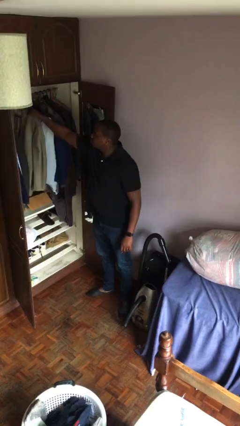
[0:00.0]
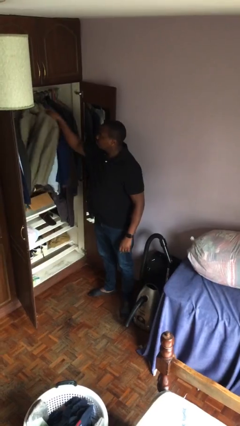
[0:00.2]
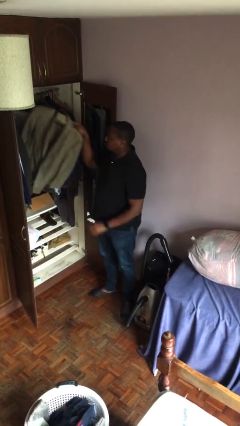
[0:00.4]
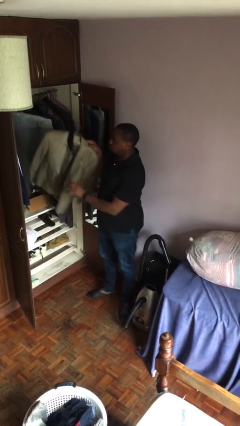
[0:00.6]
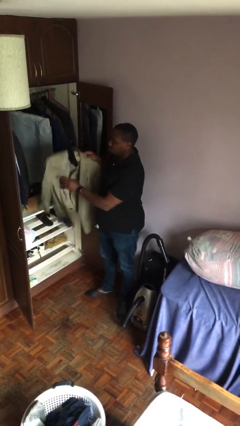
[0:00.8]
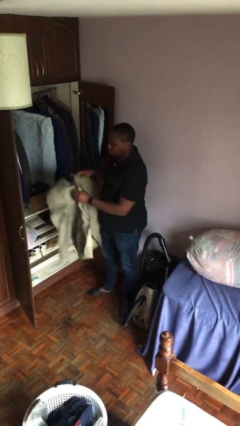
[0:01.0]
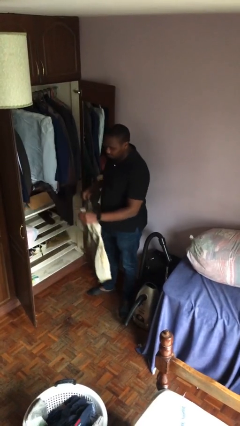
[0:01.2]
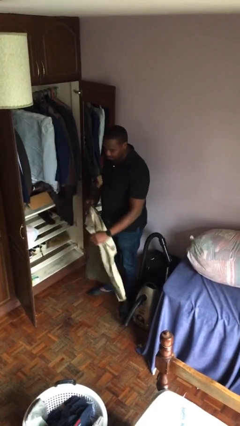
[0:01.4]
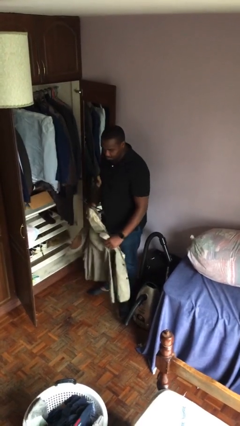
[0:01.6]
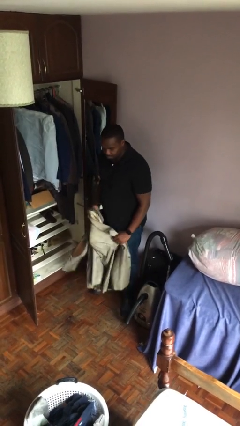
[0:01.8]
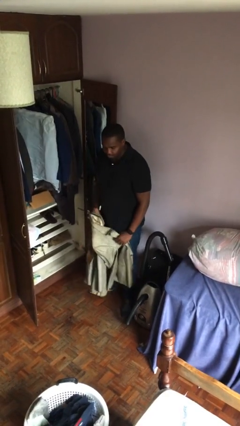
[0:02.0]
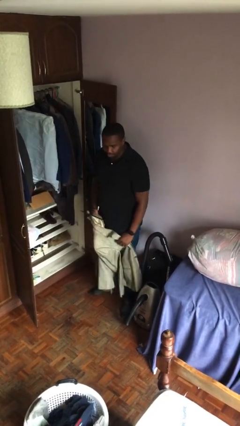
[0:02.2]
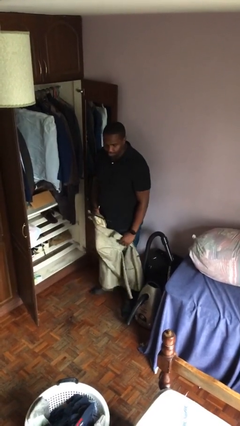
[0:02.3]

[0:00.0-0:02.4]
person takes clothes from closet

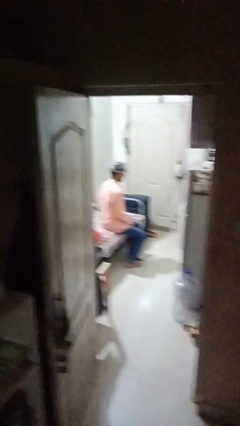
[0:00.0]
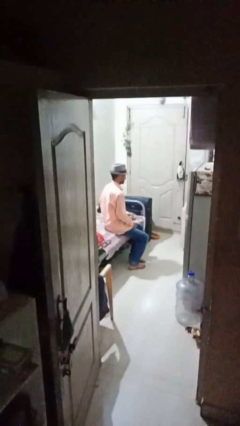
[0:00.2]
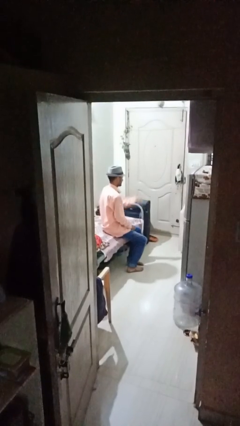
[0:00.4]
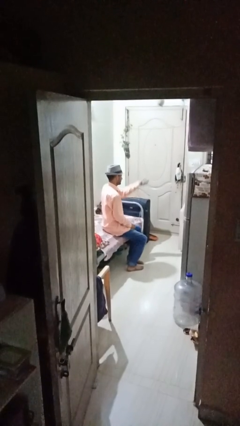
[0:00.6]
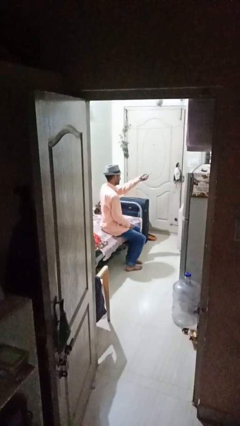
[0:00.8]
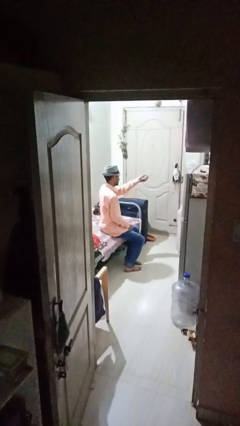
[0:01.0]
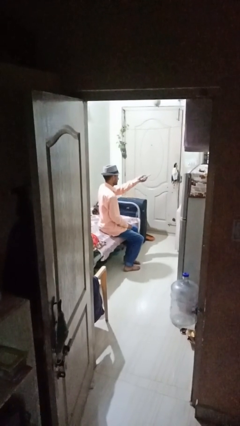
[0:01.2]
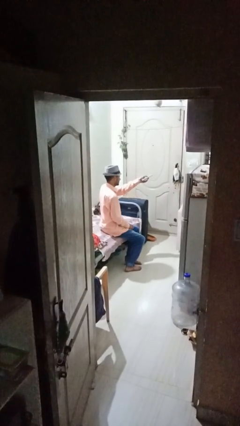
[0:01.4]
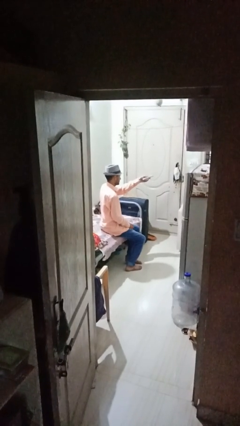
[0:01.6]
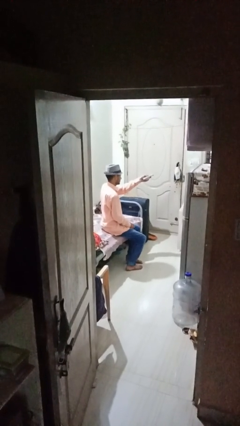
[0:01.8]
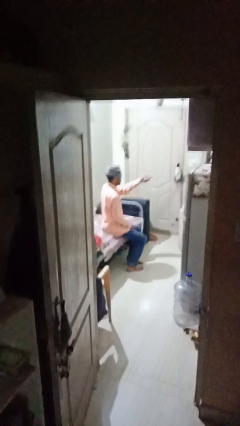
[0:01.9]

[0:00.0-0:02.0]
person uses television remote

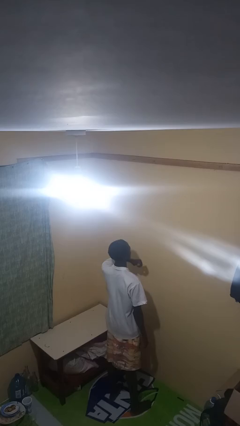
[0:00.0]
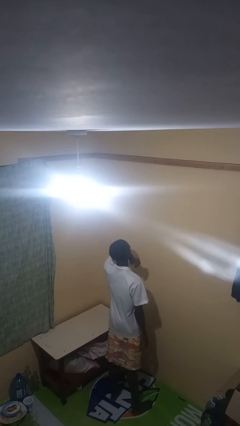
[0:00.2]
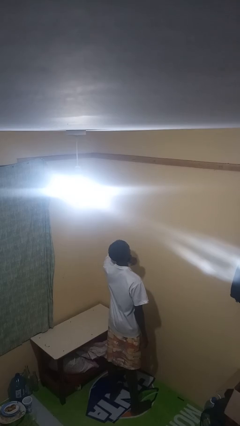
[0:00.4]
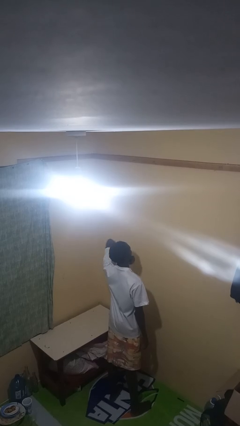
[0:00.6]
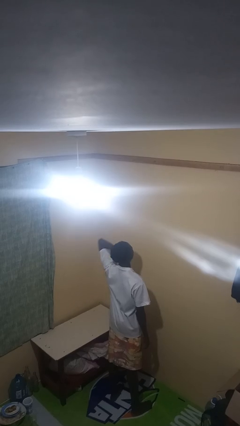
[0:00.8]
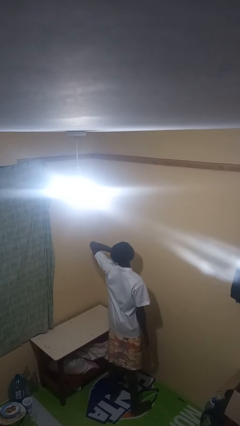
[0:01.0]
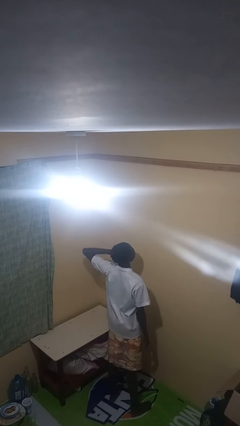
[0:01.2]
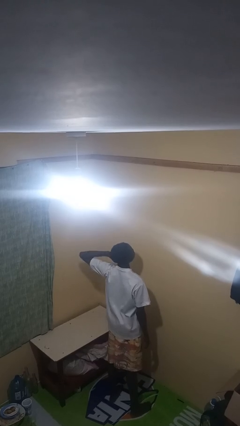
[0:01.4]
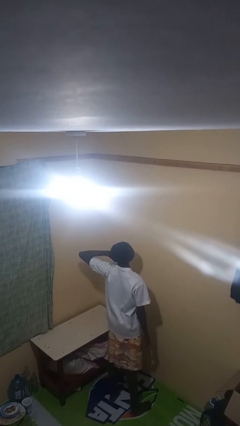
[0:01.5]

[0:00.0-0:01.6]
person gestures cut

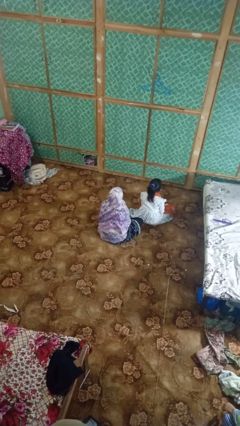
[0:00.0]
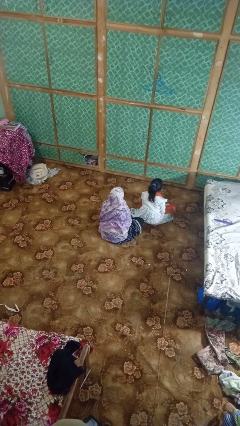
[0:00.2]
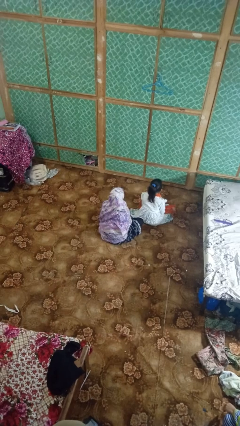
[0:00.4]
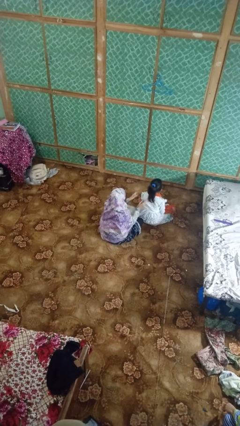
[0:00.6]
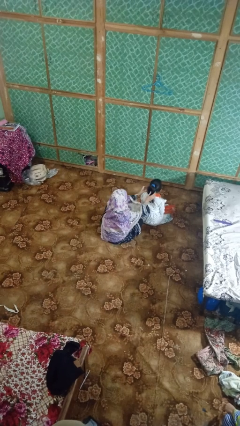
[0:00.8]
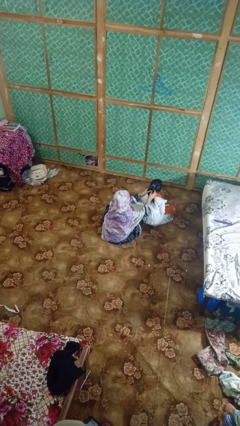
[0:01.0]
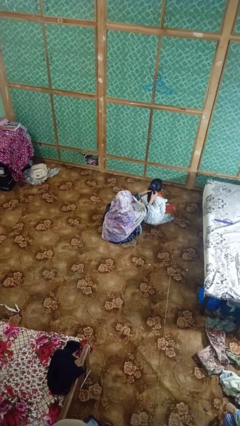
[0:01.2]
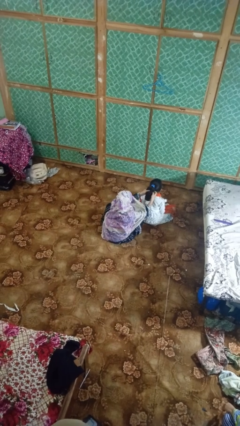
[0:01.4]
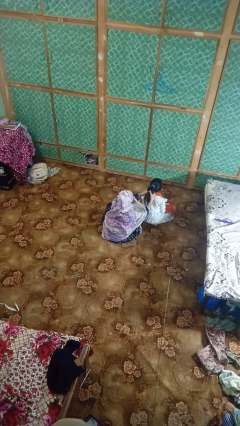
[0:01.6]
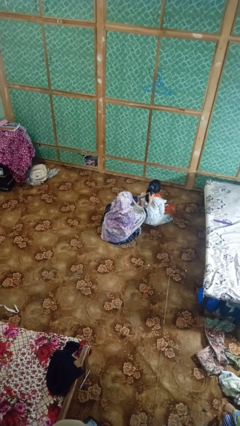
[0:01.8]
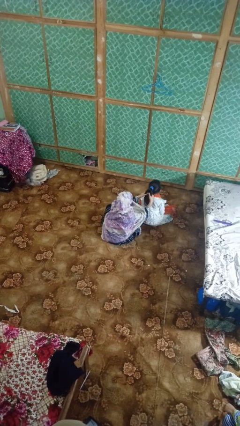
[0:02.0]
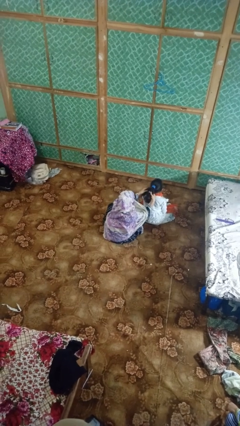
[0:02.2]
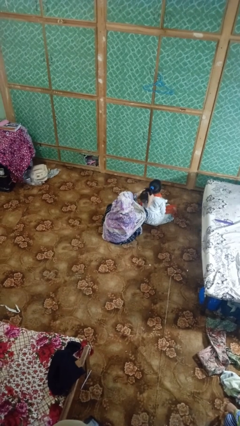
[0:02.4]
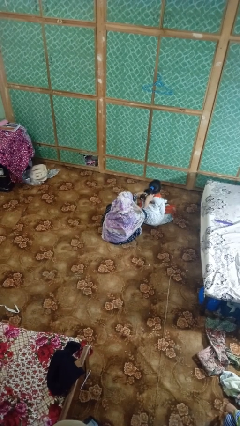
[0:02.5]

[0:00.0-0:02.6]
person braids hair of person

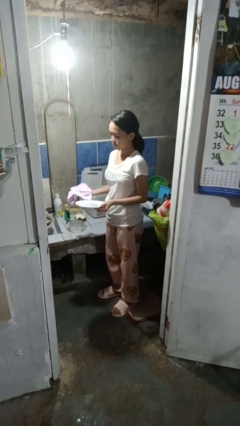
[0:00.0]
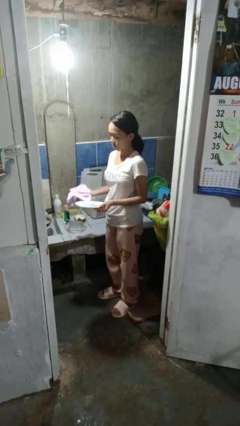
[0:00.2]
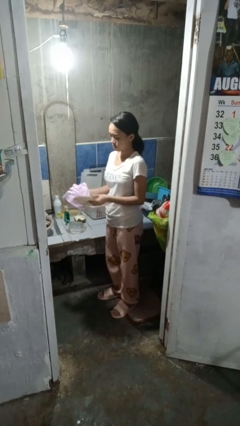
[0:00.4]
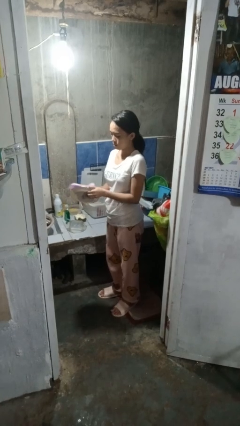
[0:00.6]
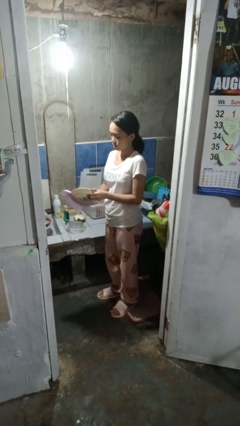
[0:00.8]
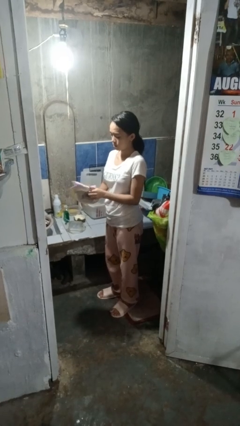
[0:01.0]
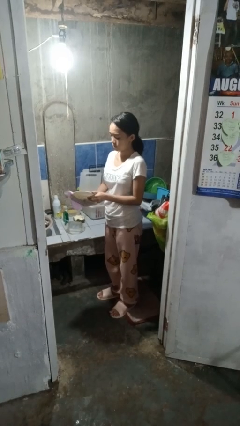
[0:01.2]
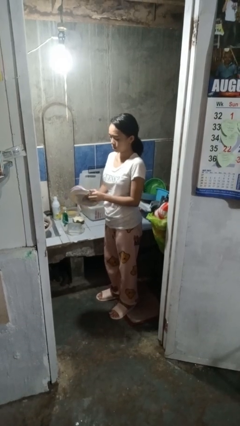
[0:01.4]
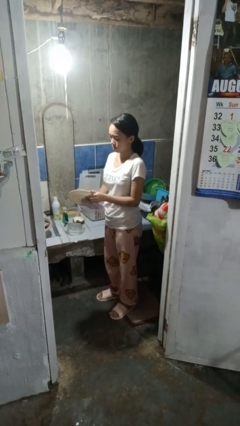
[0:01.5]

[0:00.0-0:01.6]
person dries dish

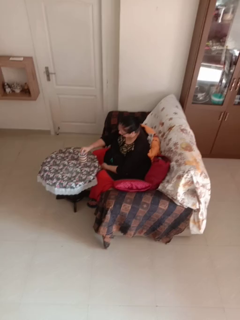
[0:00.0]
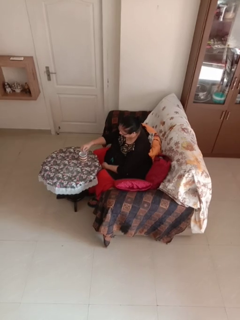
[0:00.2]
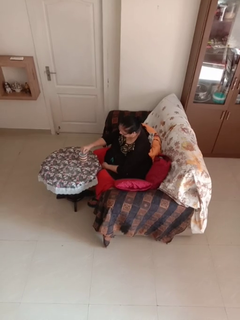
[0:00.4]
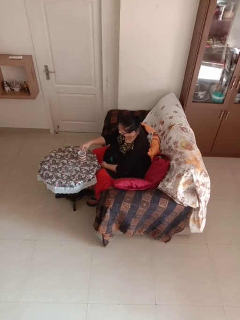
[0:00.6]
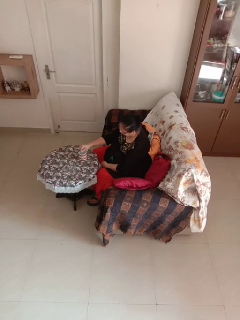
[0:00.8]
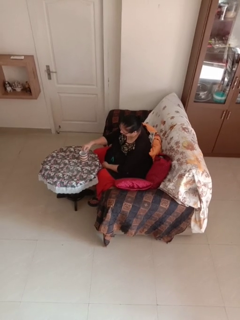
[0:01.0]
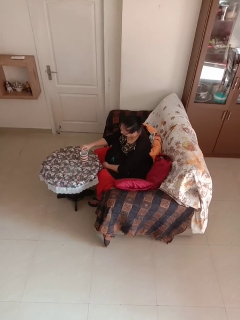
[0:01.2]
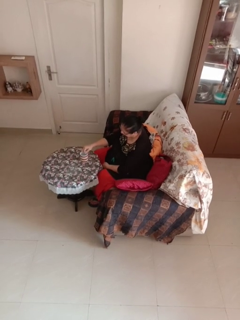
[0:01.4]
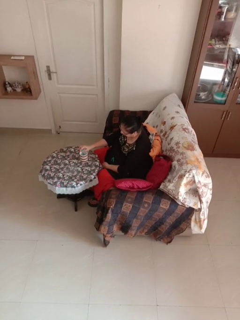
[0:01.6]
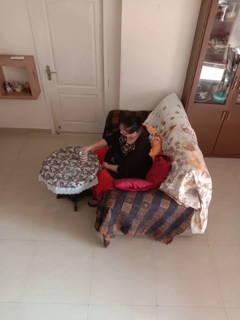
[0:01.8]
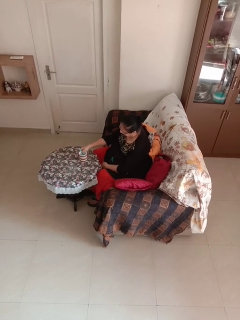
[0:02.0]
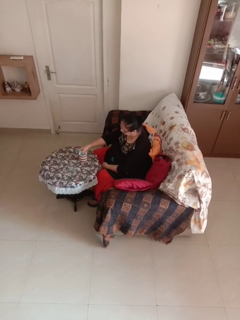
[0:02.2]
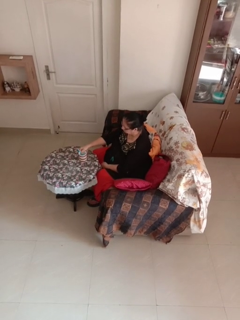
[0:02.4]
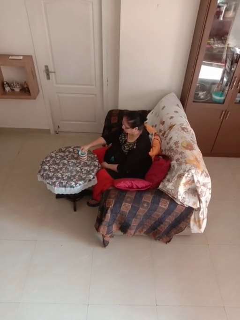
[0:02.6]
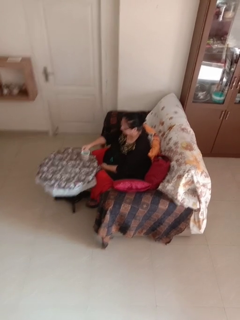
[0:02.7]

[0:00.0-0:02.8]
person stirs mug

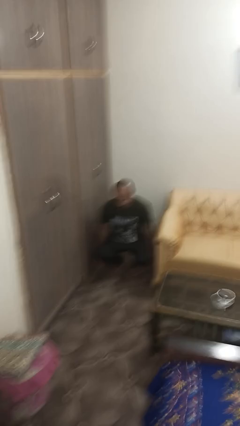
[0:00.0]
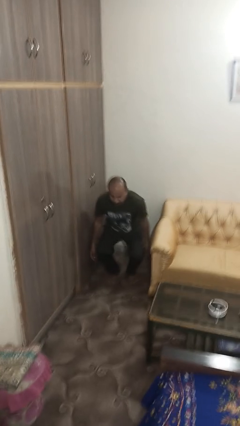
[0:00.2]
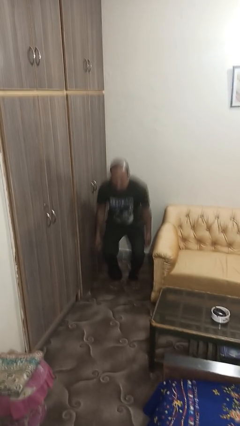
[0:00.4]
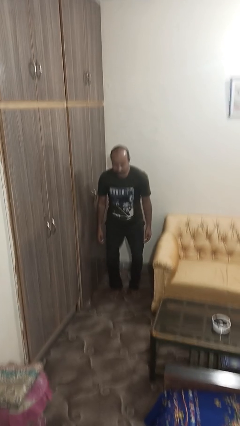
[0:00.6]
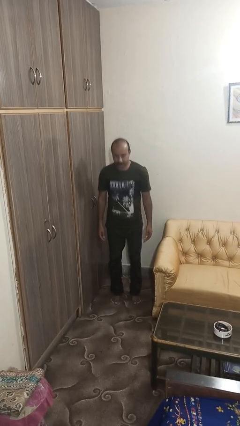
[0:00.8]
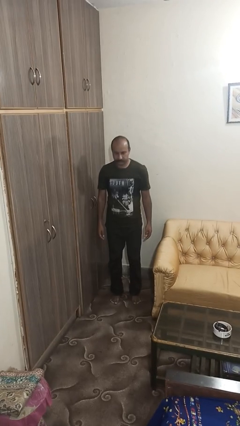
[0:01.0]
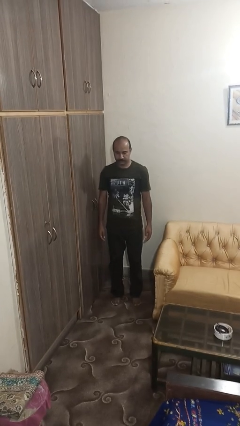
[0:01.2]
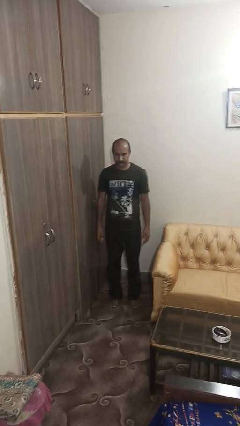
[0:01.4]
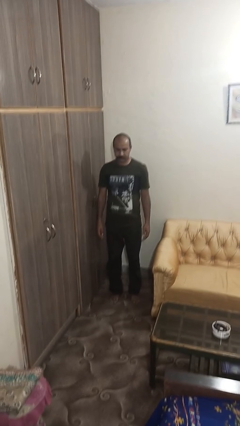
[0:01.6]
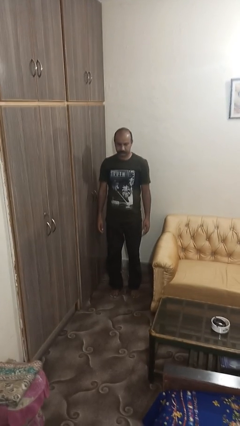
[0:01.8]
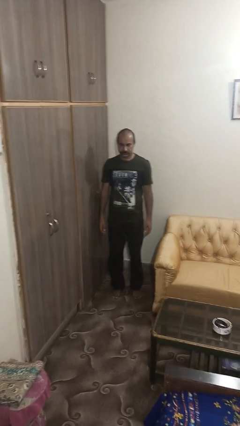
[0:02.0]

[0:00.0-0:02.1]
person stands up

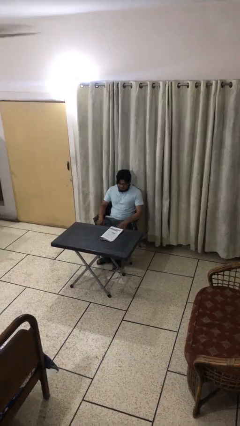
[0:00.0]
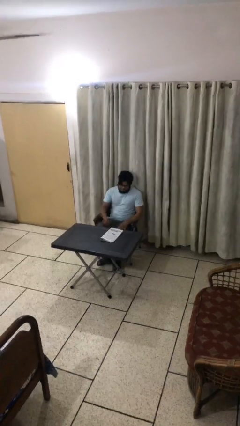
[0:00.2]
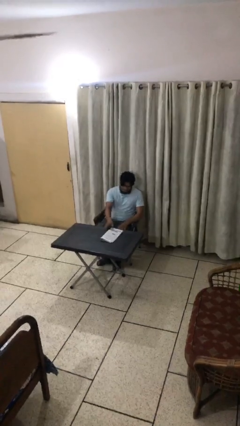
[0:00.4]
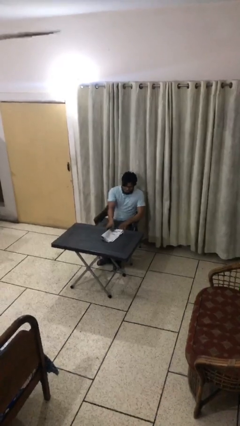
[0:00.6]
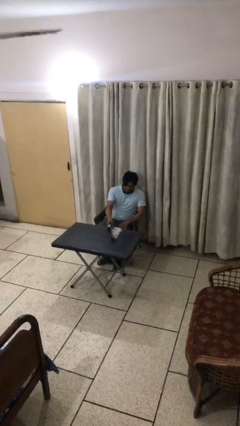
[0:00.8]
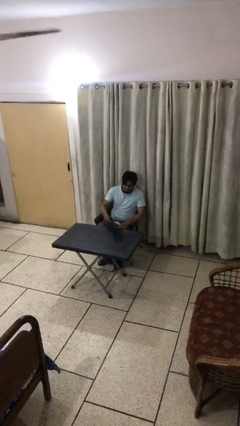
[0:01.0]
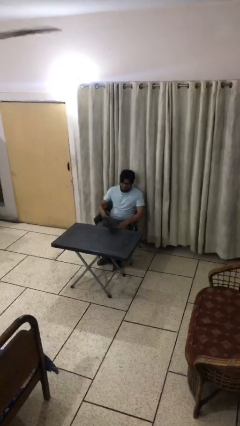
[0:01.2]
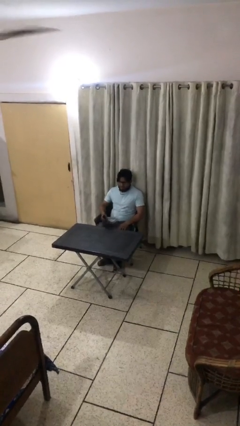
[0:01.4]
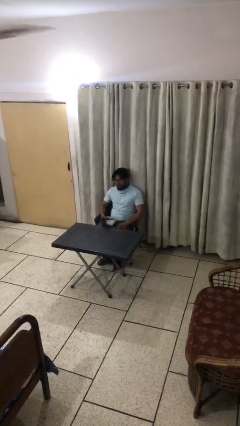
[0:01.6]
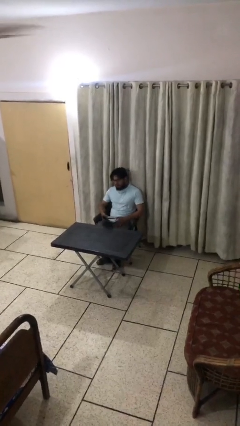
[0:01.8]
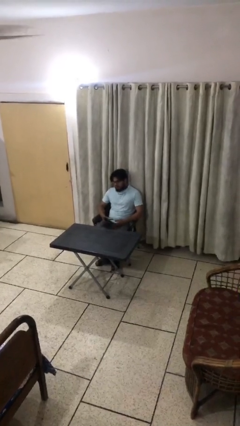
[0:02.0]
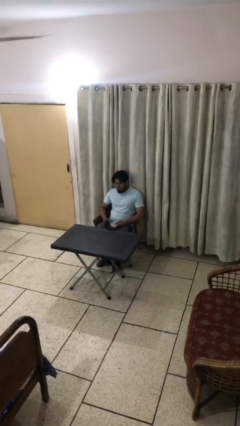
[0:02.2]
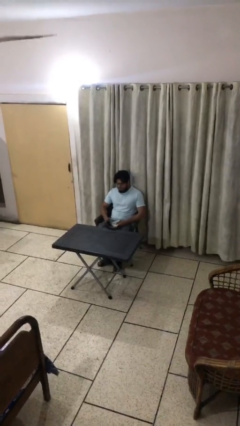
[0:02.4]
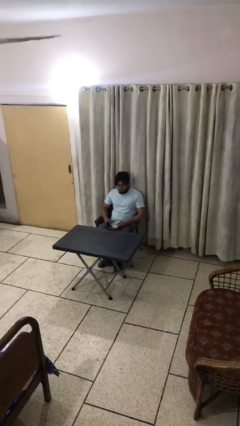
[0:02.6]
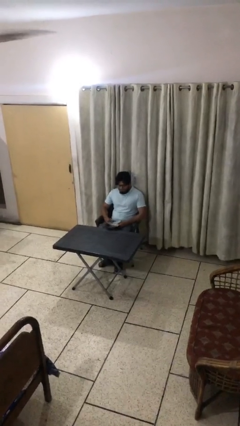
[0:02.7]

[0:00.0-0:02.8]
person picks up object from table
